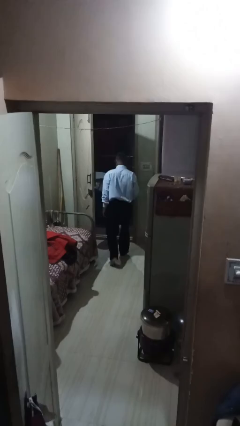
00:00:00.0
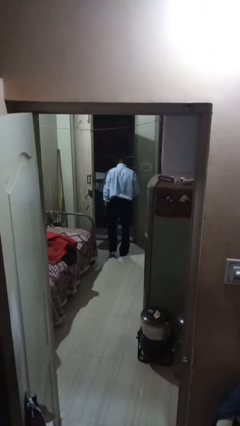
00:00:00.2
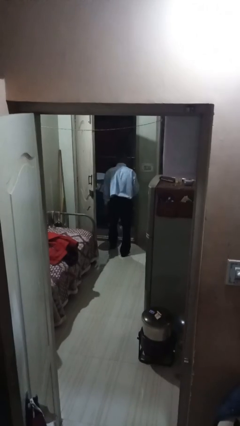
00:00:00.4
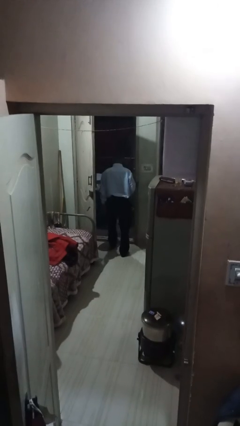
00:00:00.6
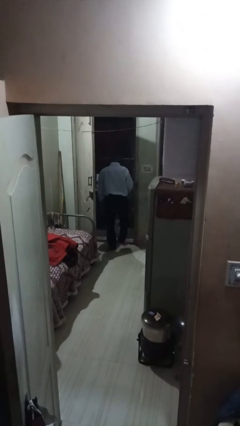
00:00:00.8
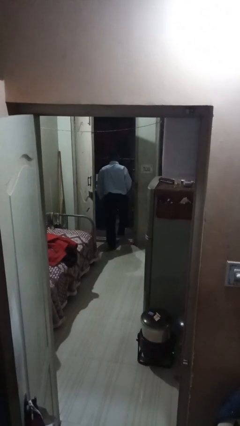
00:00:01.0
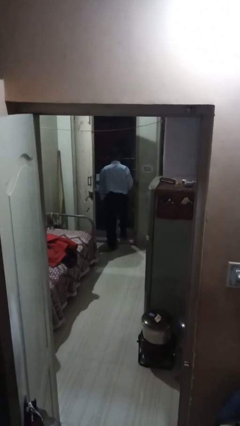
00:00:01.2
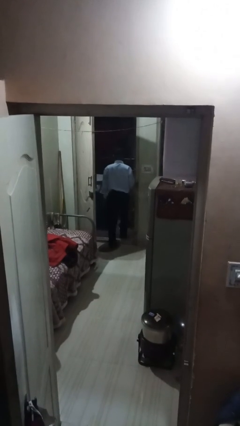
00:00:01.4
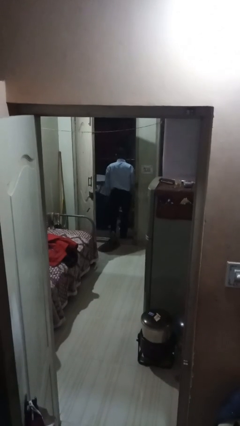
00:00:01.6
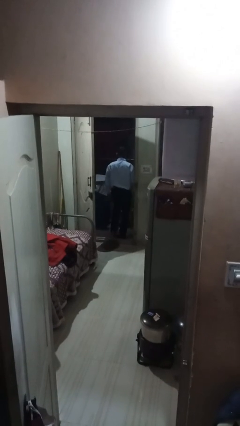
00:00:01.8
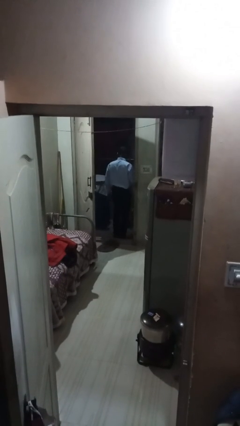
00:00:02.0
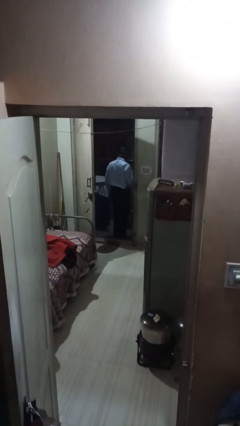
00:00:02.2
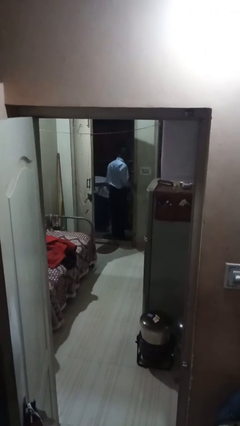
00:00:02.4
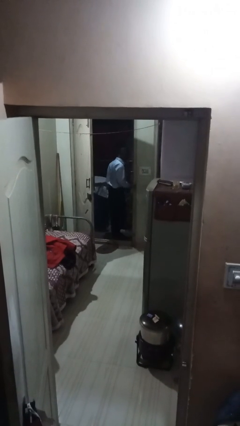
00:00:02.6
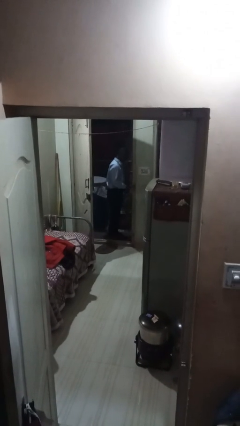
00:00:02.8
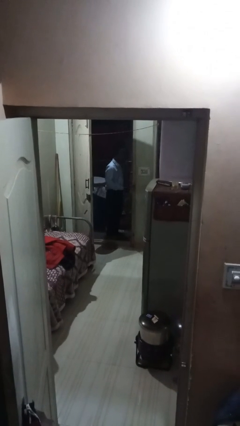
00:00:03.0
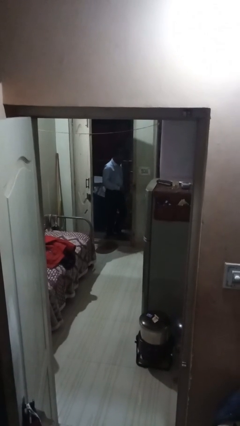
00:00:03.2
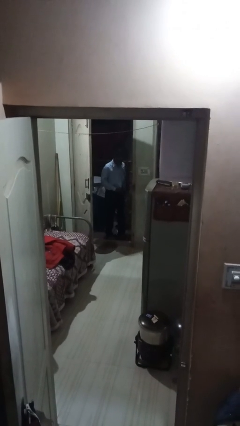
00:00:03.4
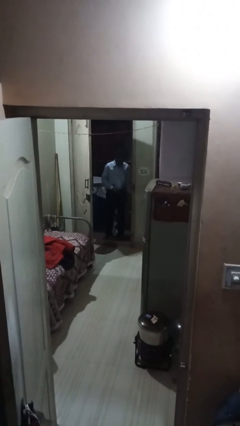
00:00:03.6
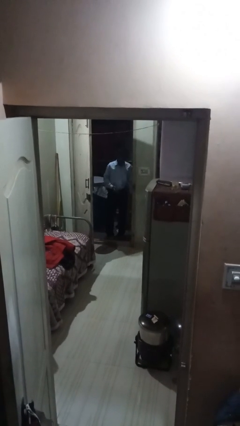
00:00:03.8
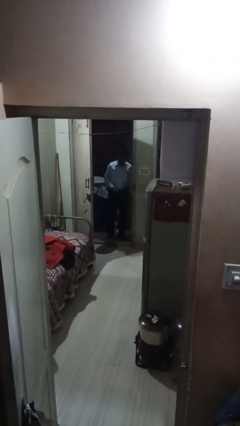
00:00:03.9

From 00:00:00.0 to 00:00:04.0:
person exits scene through structure

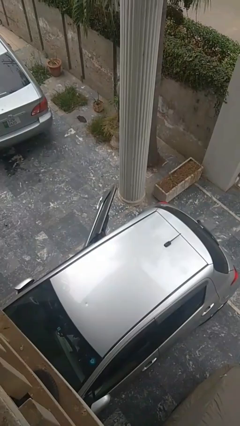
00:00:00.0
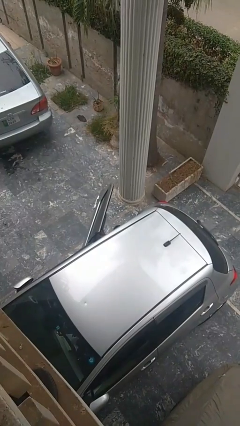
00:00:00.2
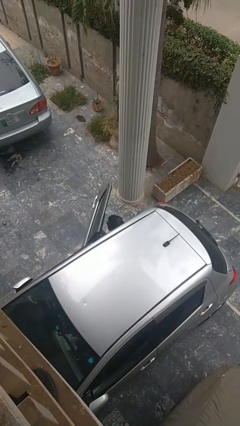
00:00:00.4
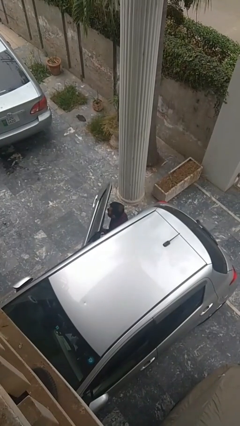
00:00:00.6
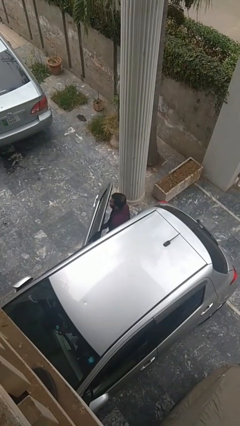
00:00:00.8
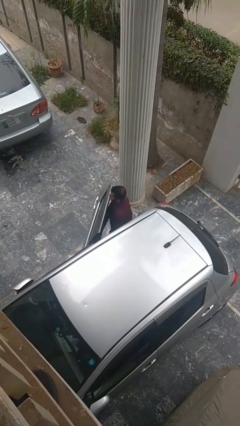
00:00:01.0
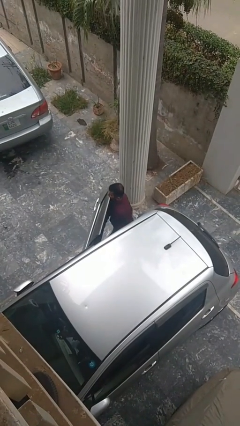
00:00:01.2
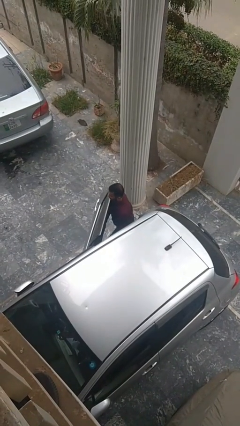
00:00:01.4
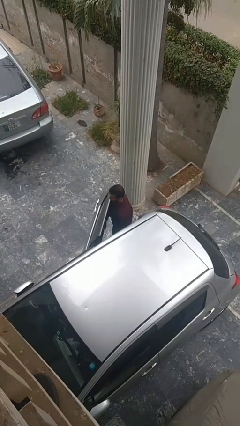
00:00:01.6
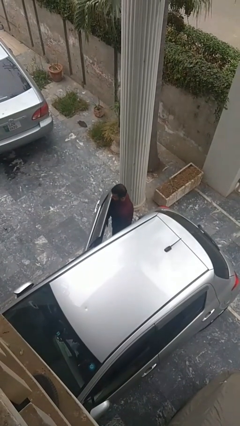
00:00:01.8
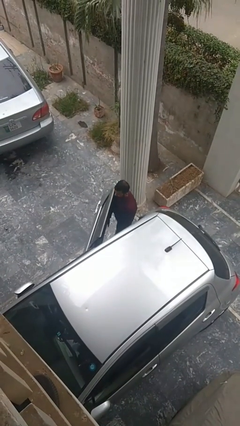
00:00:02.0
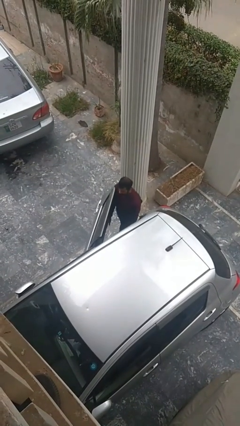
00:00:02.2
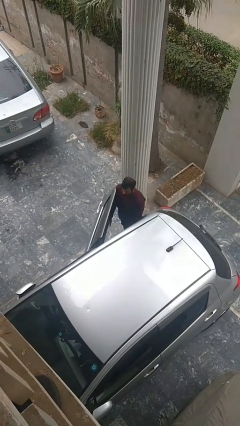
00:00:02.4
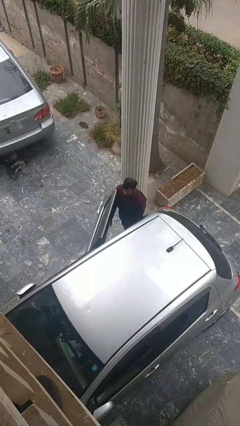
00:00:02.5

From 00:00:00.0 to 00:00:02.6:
person exits car

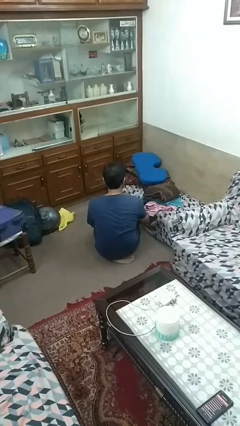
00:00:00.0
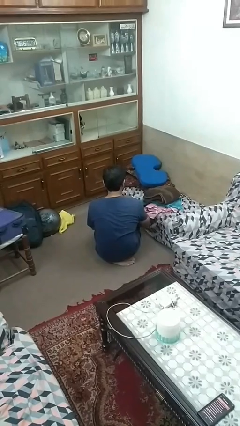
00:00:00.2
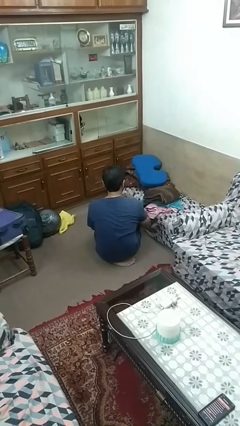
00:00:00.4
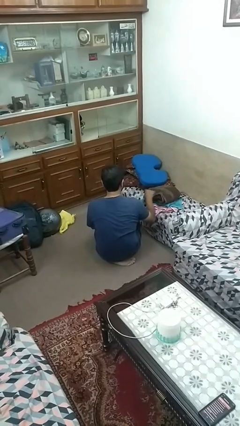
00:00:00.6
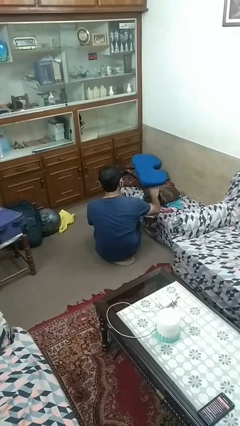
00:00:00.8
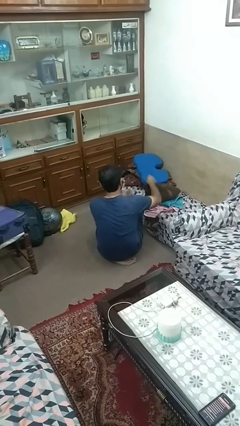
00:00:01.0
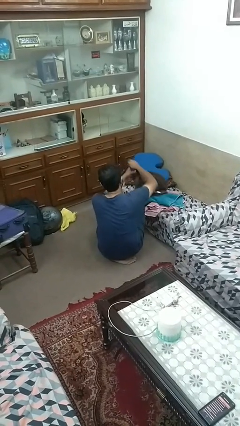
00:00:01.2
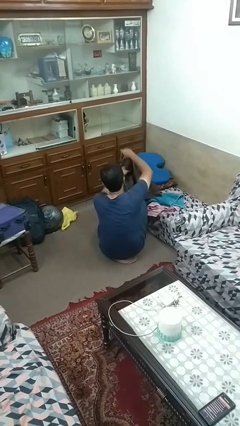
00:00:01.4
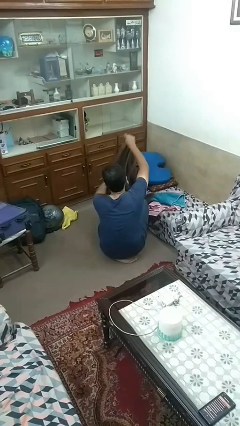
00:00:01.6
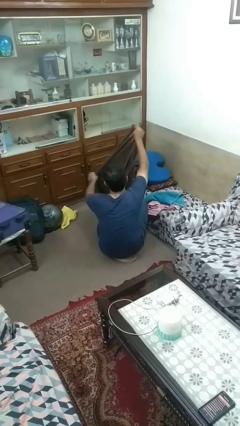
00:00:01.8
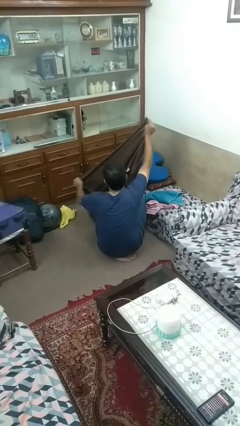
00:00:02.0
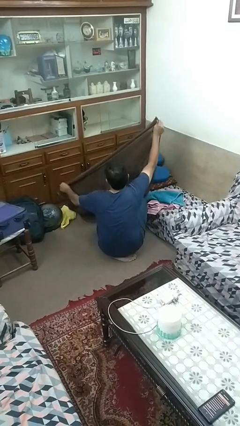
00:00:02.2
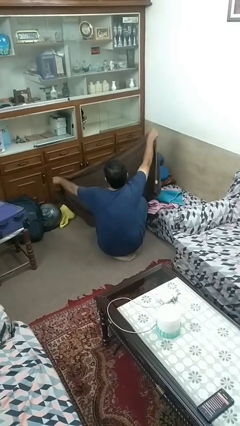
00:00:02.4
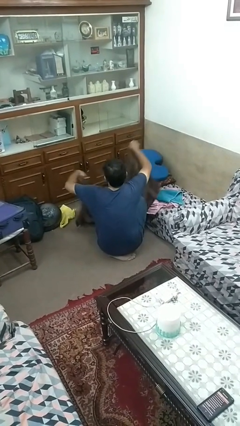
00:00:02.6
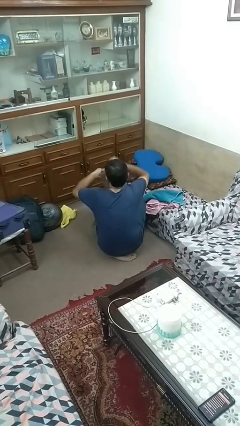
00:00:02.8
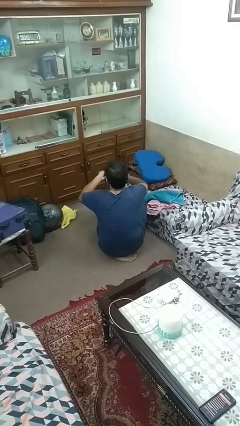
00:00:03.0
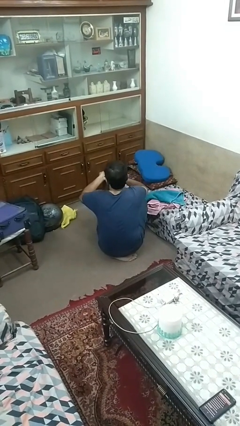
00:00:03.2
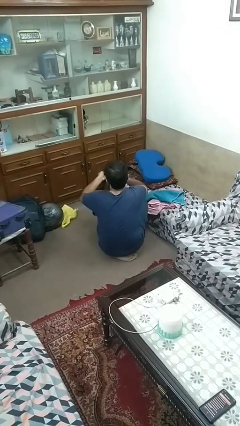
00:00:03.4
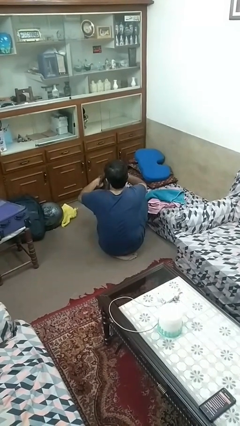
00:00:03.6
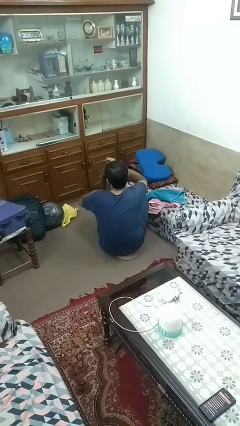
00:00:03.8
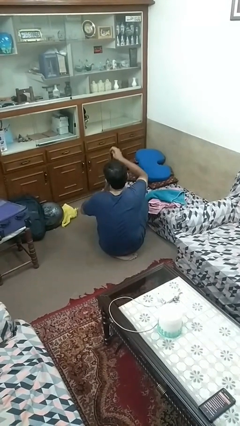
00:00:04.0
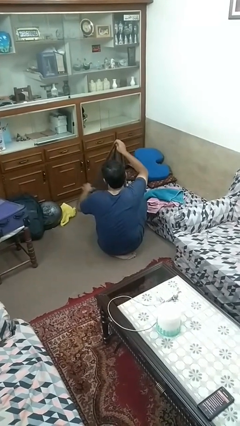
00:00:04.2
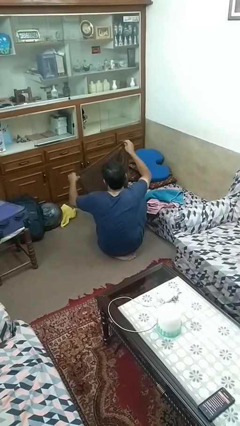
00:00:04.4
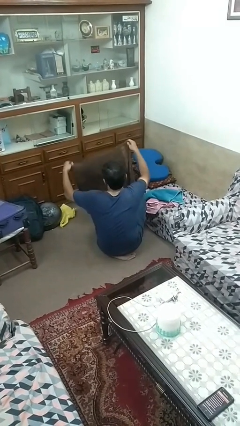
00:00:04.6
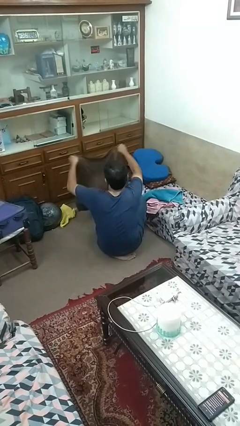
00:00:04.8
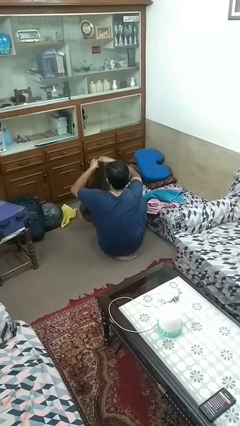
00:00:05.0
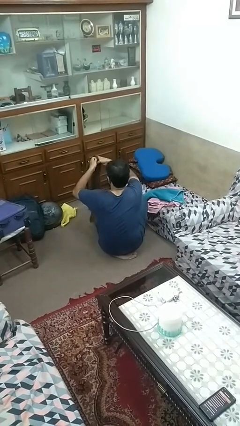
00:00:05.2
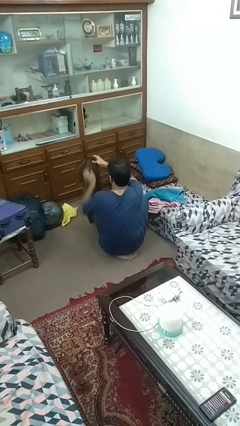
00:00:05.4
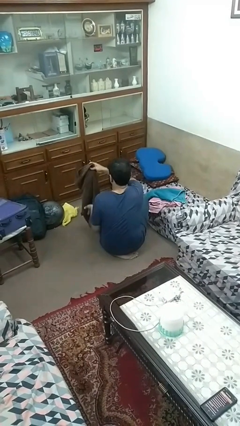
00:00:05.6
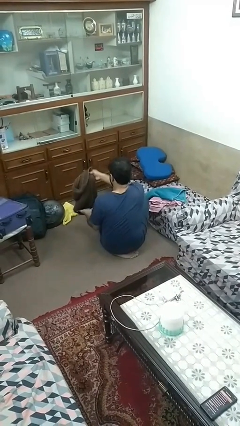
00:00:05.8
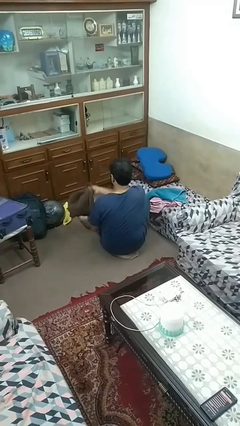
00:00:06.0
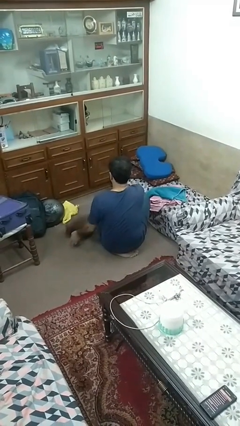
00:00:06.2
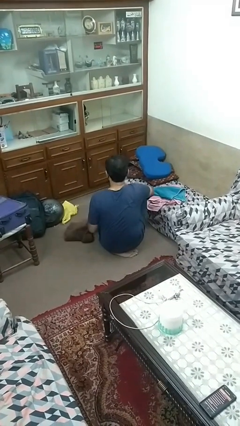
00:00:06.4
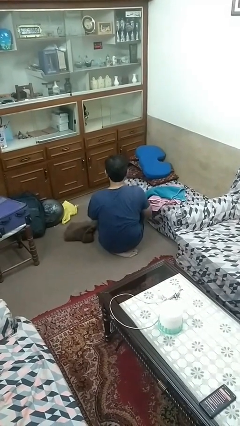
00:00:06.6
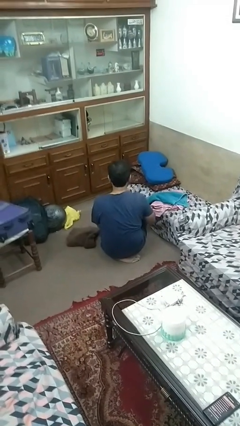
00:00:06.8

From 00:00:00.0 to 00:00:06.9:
person folds towel

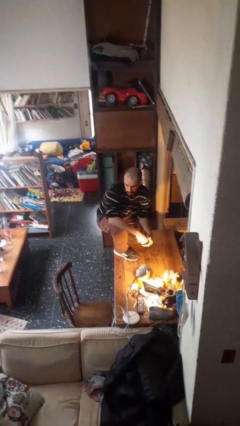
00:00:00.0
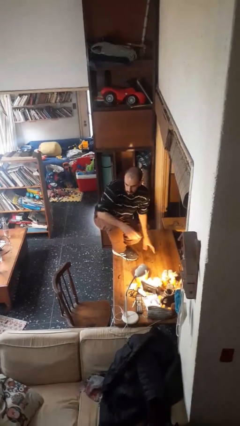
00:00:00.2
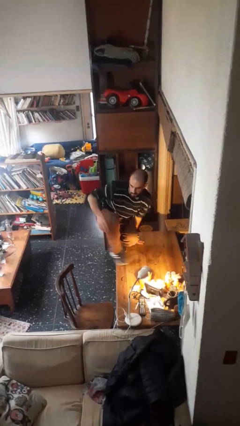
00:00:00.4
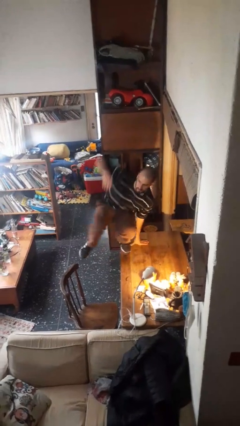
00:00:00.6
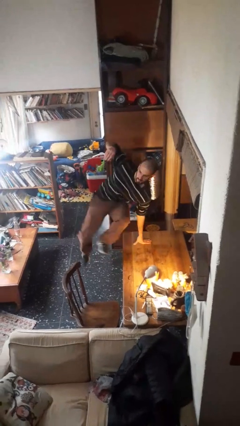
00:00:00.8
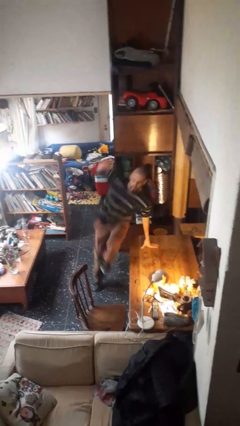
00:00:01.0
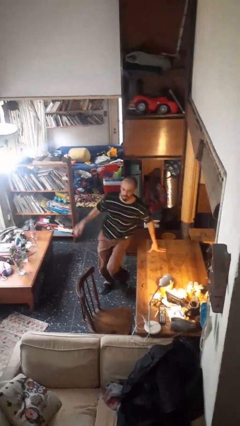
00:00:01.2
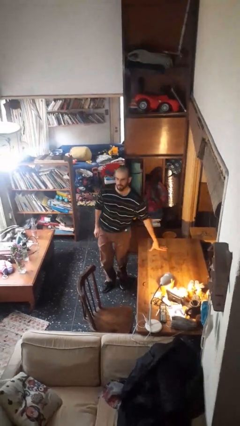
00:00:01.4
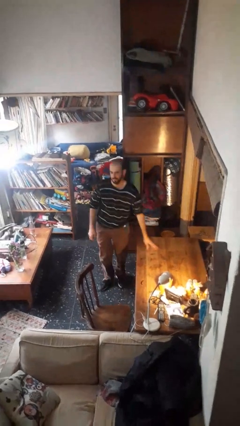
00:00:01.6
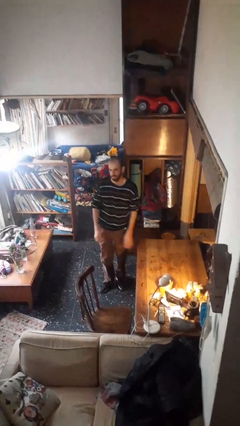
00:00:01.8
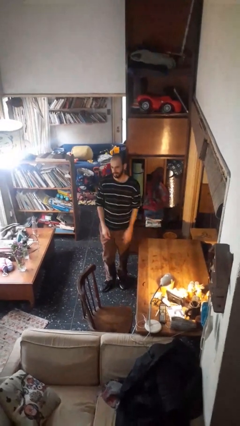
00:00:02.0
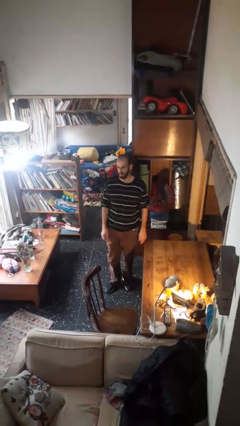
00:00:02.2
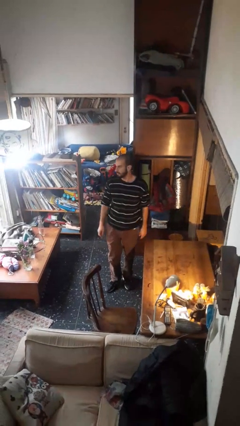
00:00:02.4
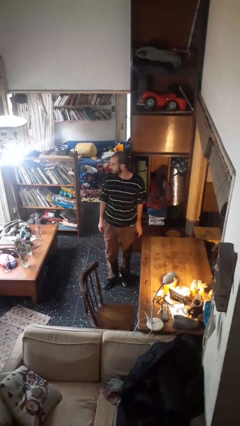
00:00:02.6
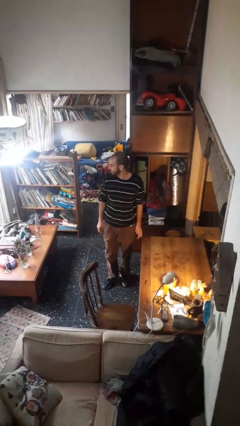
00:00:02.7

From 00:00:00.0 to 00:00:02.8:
person climbs off table

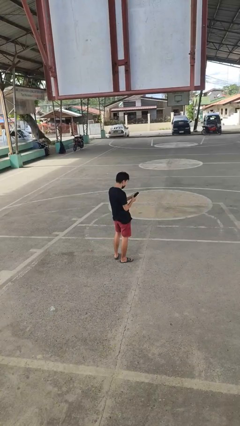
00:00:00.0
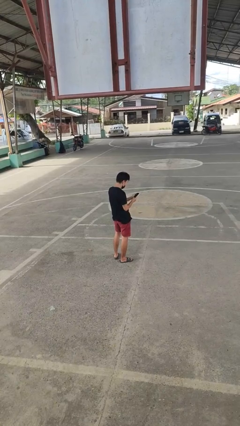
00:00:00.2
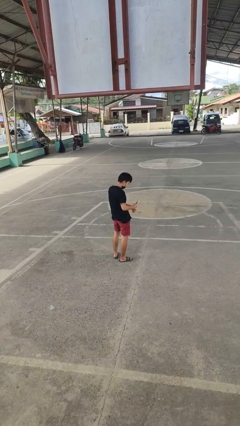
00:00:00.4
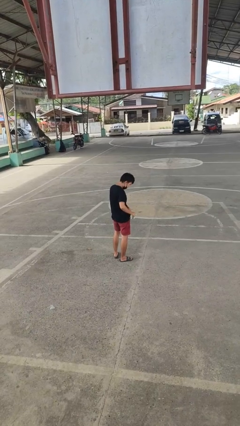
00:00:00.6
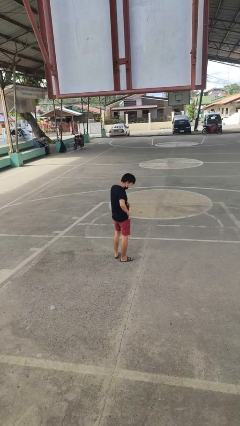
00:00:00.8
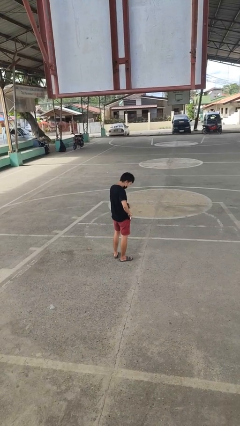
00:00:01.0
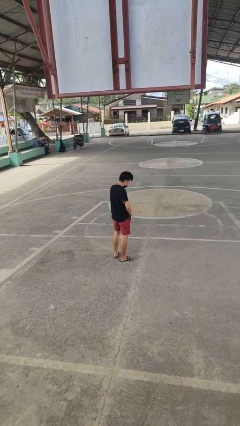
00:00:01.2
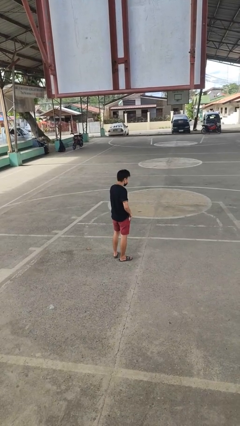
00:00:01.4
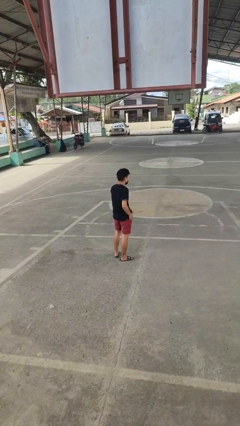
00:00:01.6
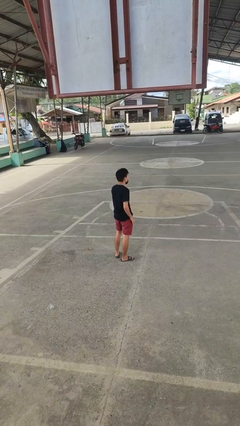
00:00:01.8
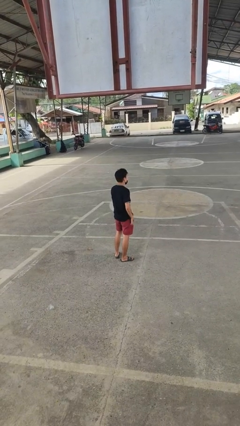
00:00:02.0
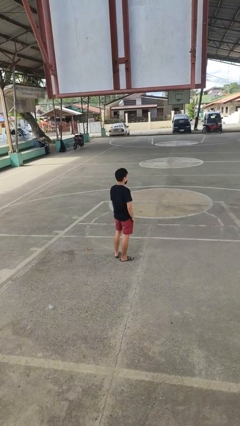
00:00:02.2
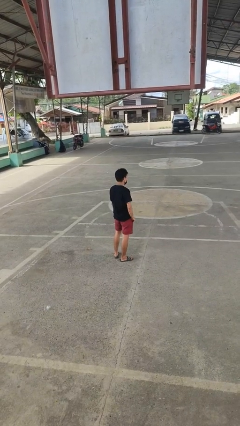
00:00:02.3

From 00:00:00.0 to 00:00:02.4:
person puts phone into pocket
